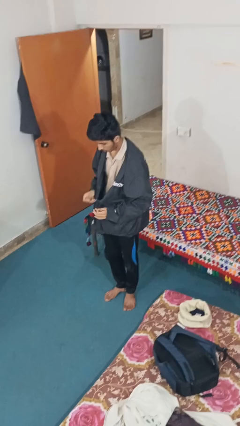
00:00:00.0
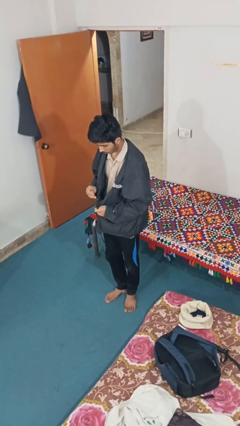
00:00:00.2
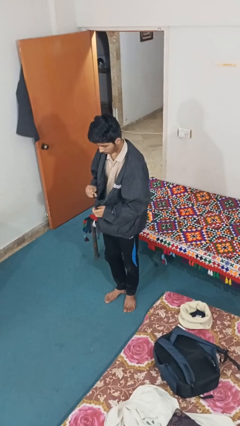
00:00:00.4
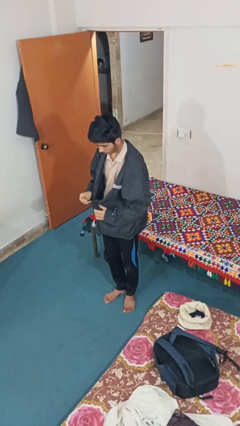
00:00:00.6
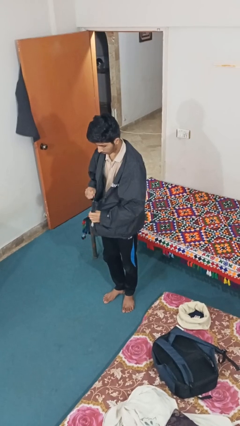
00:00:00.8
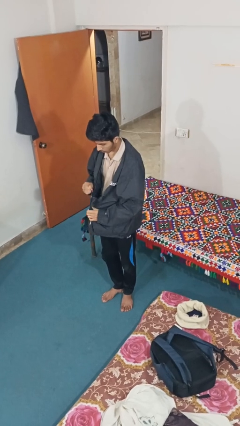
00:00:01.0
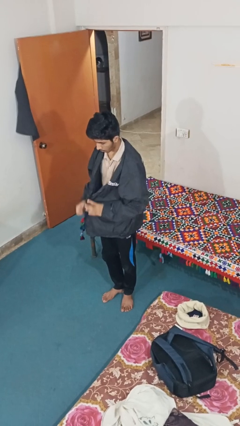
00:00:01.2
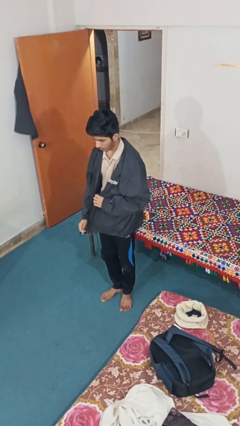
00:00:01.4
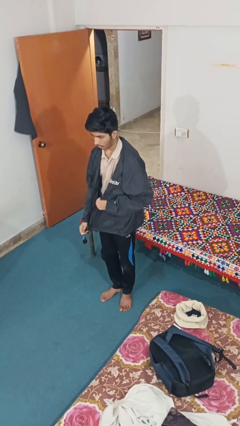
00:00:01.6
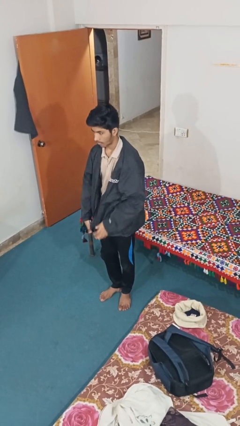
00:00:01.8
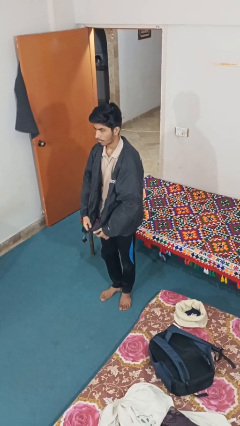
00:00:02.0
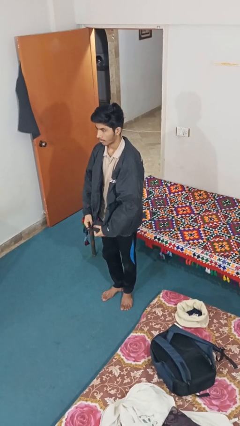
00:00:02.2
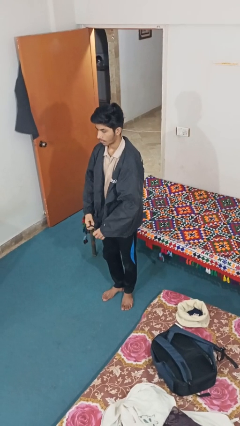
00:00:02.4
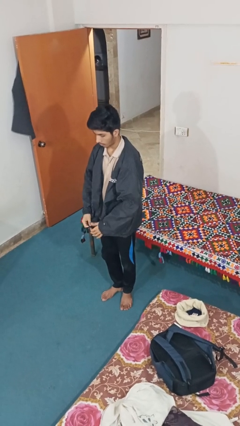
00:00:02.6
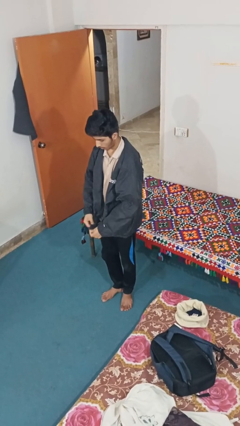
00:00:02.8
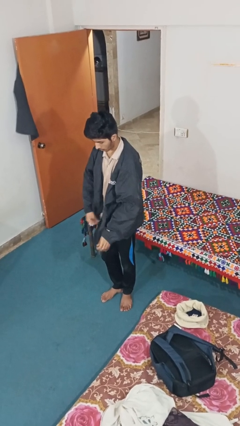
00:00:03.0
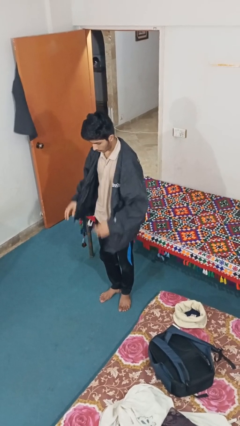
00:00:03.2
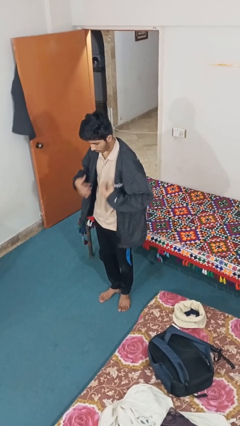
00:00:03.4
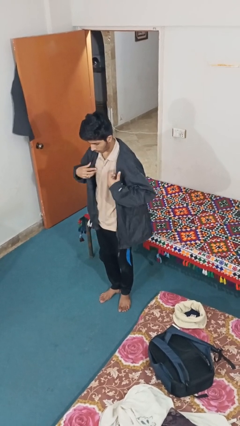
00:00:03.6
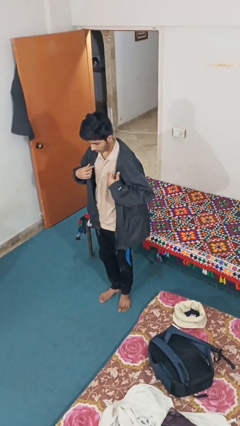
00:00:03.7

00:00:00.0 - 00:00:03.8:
person unzips jacket

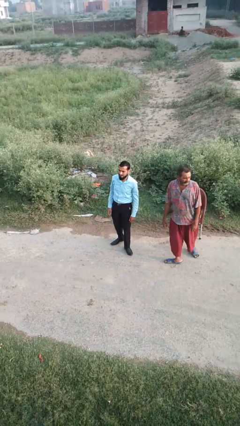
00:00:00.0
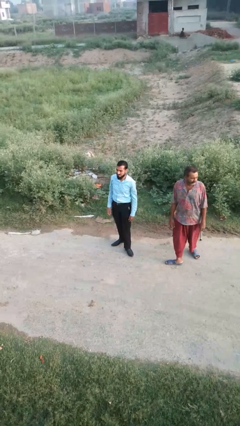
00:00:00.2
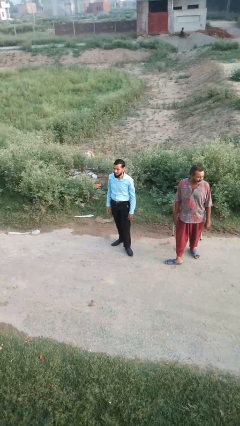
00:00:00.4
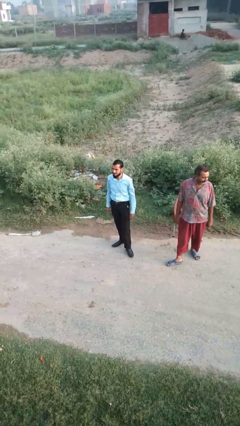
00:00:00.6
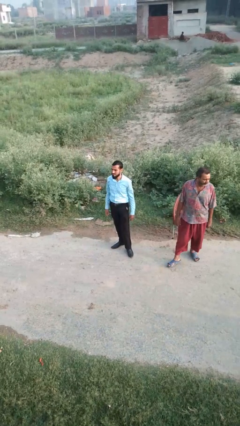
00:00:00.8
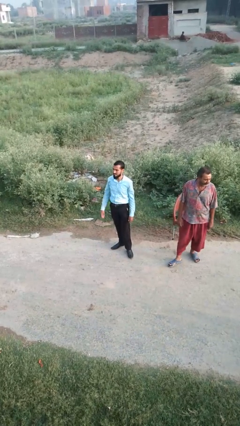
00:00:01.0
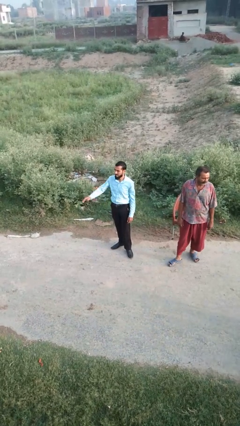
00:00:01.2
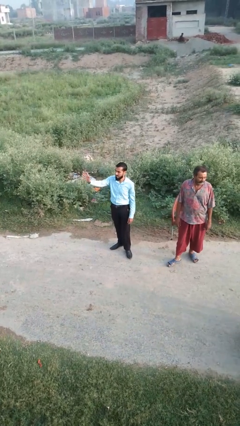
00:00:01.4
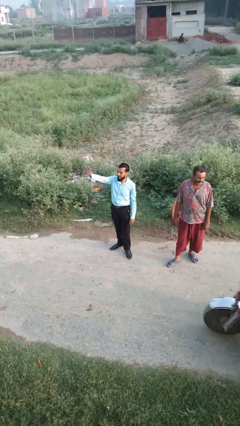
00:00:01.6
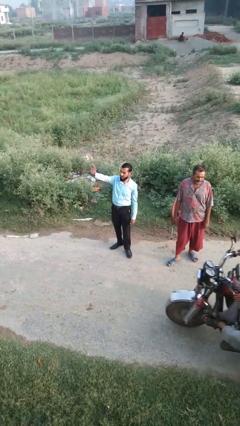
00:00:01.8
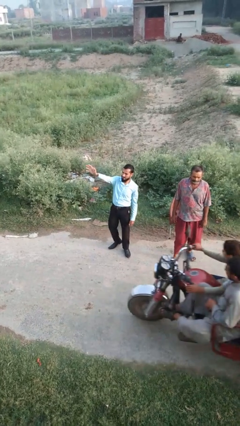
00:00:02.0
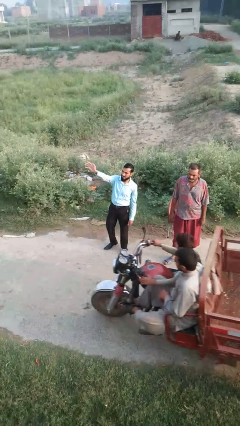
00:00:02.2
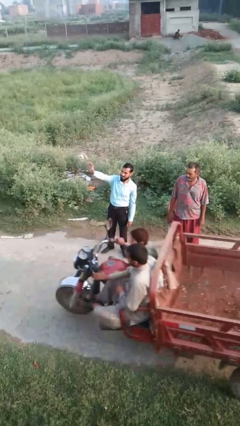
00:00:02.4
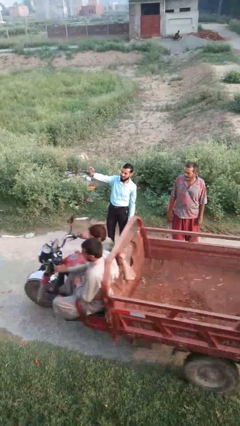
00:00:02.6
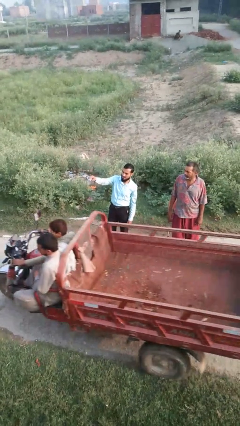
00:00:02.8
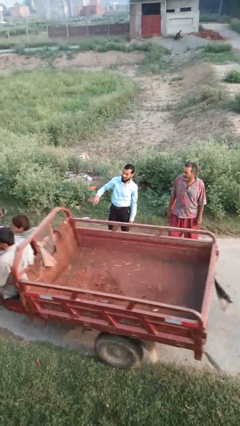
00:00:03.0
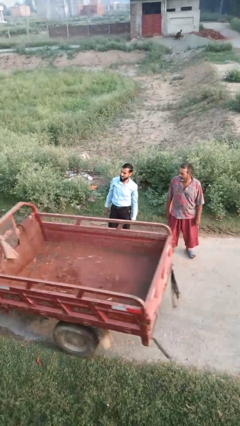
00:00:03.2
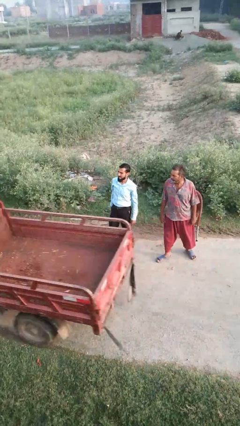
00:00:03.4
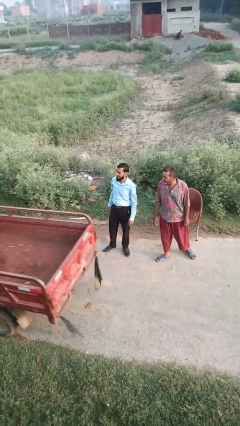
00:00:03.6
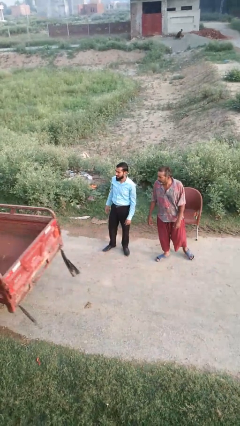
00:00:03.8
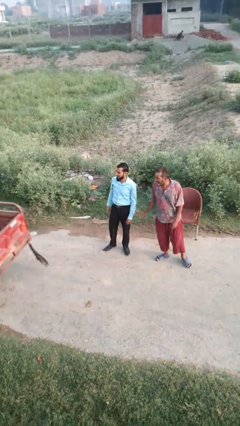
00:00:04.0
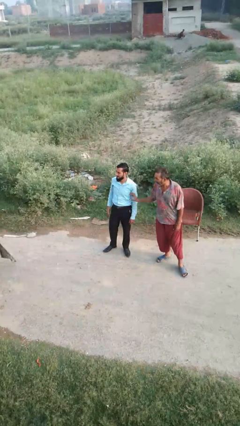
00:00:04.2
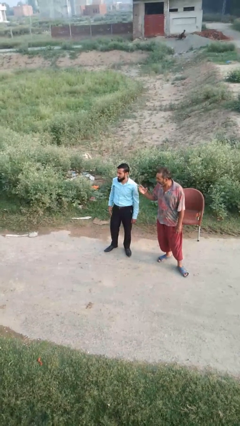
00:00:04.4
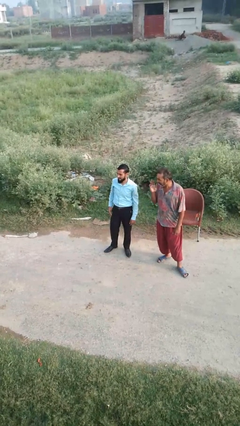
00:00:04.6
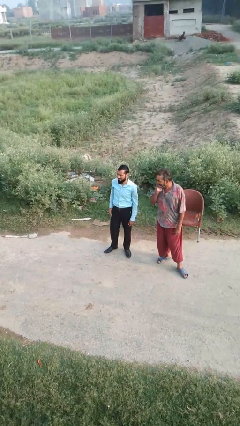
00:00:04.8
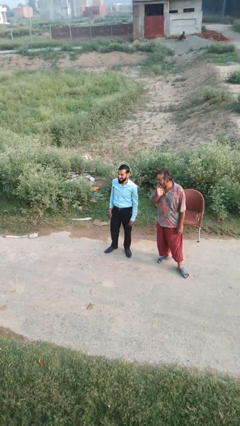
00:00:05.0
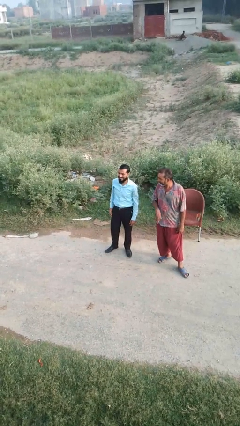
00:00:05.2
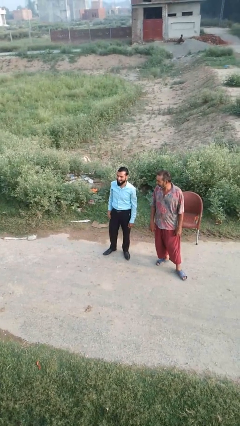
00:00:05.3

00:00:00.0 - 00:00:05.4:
person waves at person

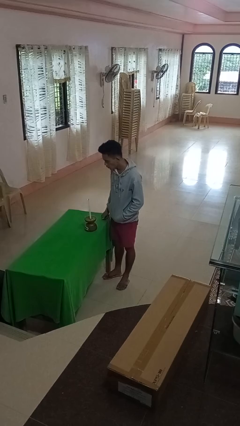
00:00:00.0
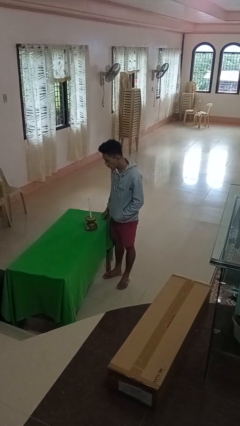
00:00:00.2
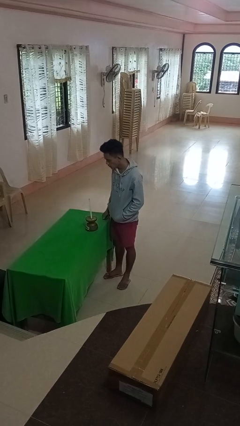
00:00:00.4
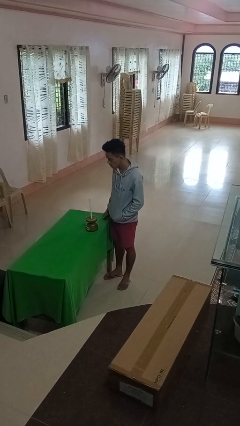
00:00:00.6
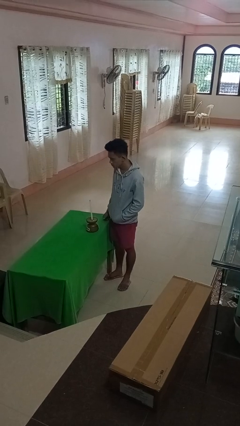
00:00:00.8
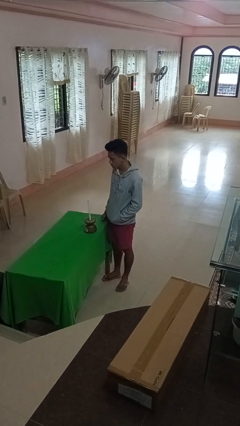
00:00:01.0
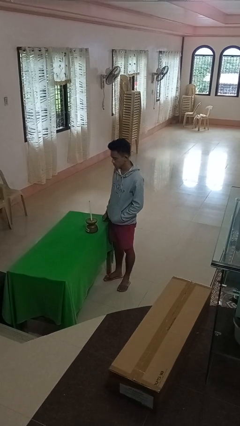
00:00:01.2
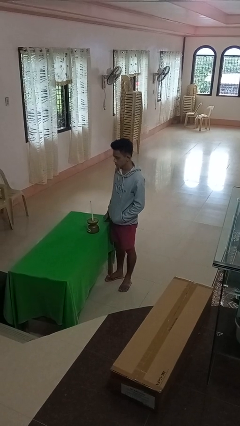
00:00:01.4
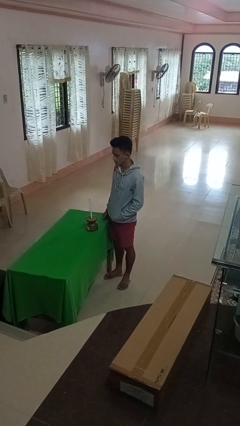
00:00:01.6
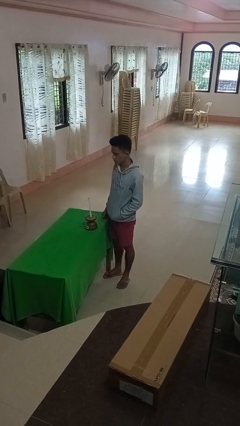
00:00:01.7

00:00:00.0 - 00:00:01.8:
person extinguishes candle

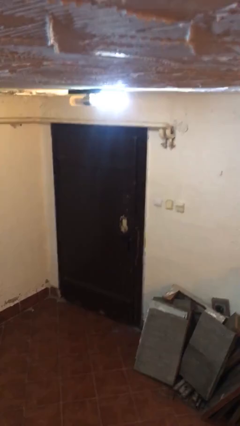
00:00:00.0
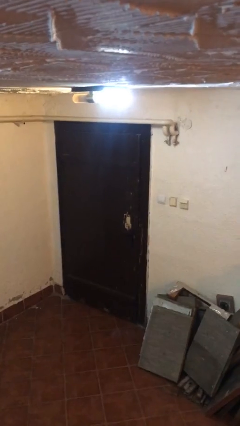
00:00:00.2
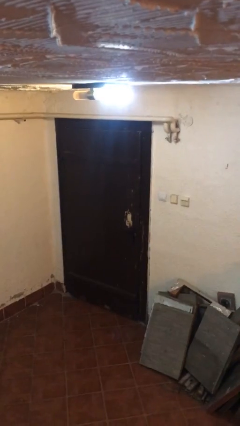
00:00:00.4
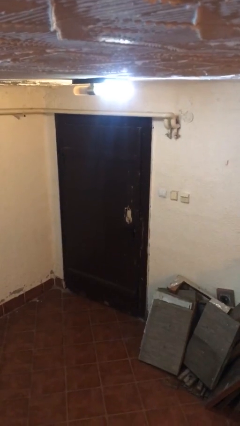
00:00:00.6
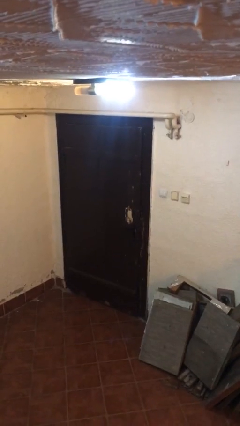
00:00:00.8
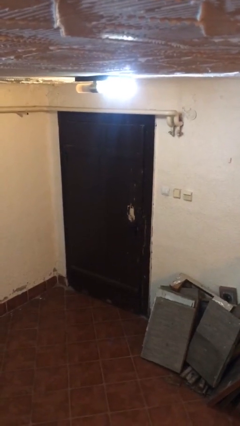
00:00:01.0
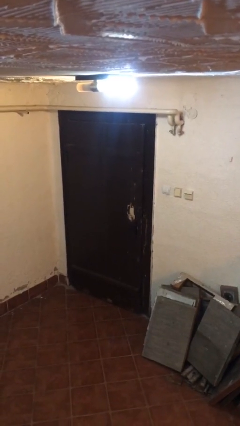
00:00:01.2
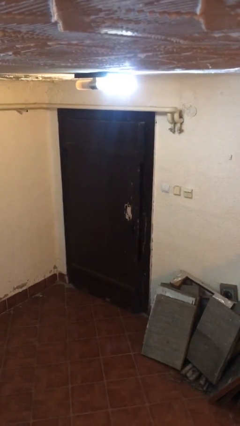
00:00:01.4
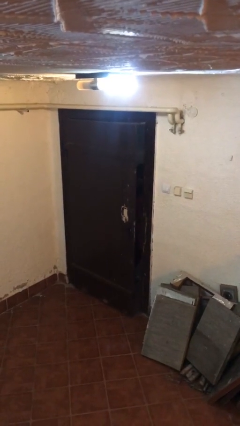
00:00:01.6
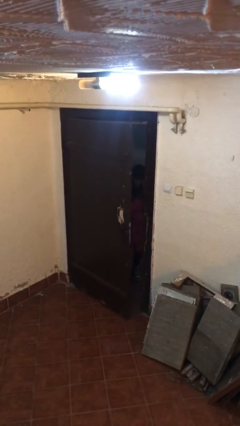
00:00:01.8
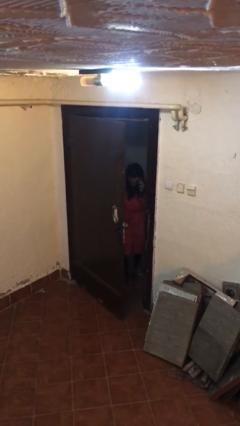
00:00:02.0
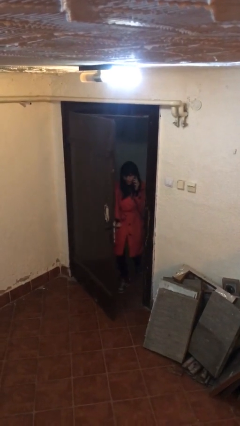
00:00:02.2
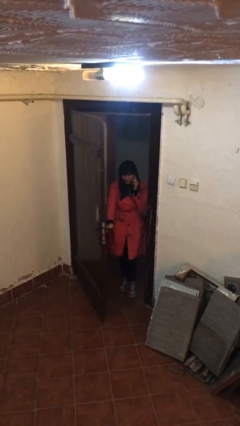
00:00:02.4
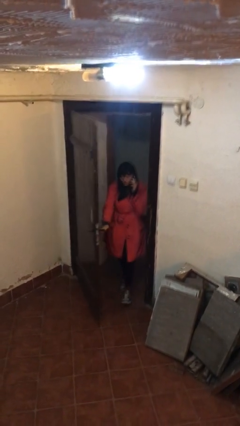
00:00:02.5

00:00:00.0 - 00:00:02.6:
person opens facility door

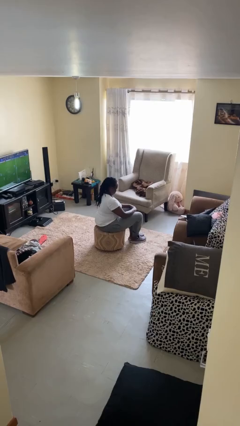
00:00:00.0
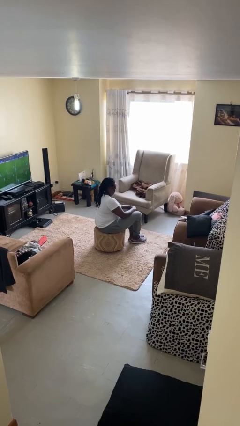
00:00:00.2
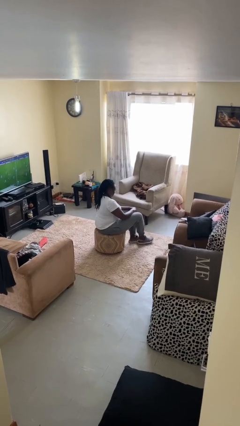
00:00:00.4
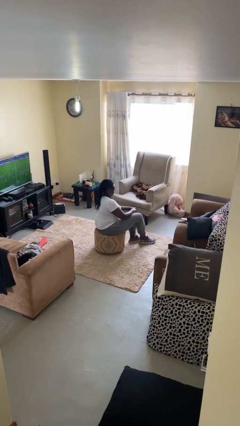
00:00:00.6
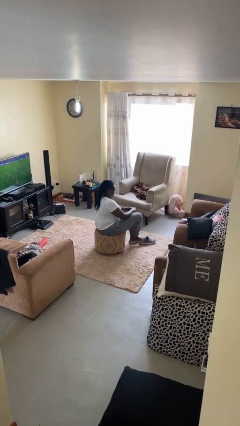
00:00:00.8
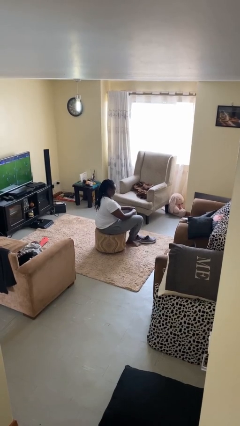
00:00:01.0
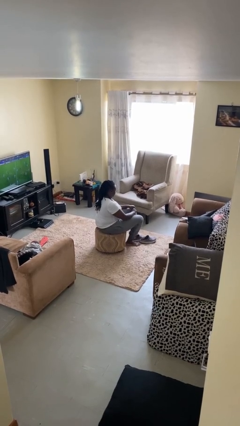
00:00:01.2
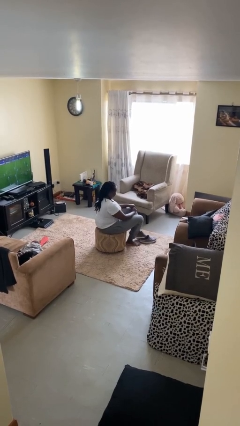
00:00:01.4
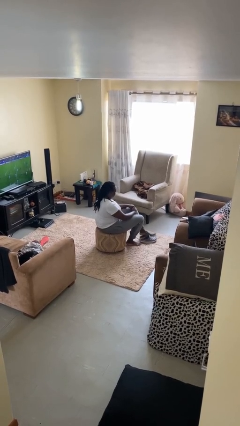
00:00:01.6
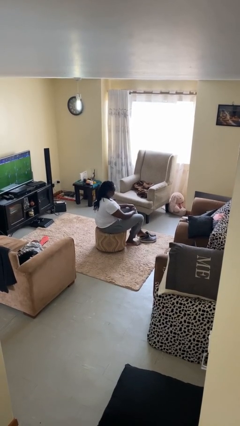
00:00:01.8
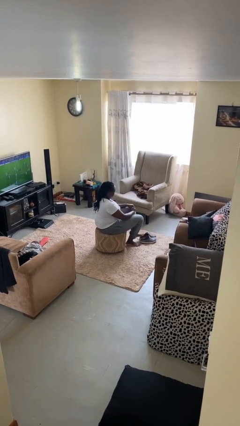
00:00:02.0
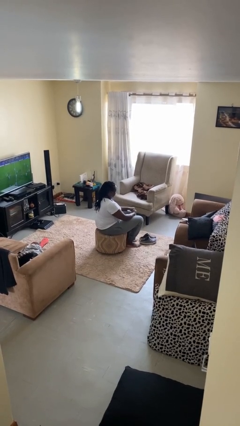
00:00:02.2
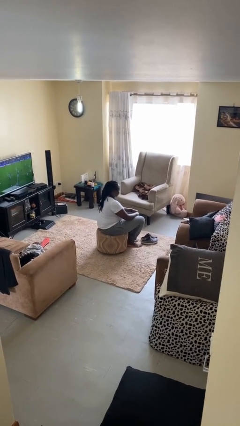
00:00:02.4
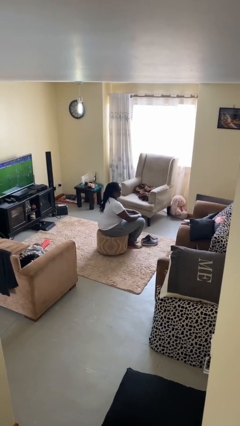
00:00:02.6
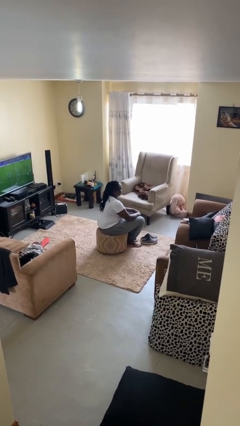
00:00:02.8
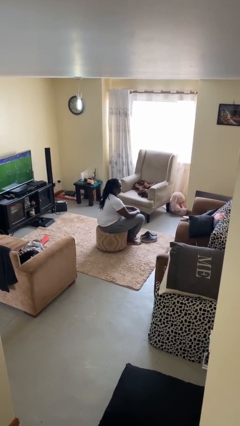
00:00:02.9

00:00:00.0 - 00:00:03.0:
person takes off shoes

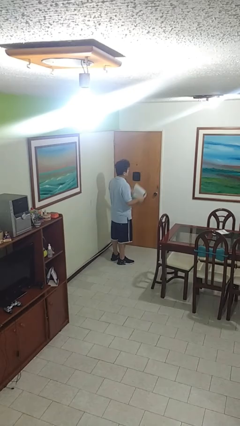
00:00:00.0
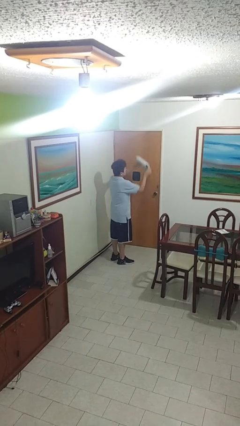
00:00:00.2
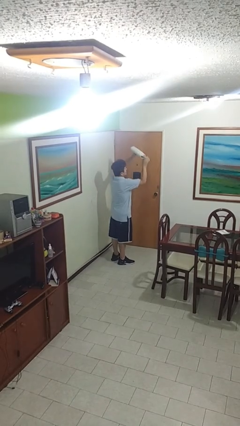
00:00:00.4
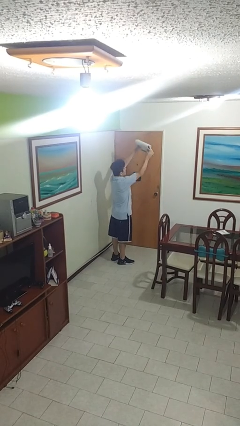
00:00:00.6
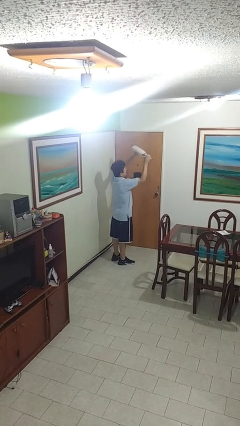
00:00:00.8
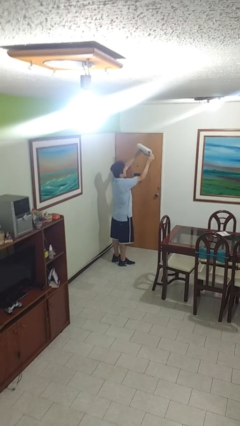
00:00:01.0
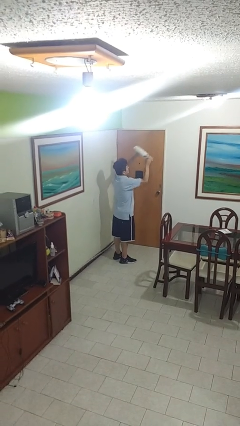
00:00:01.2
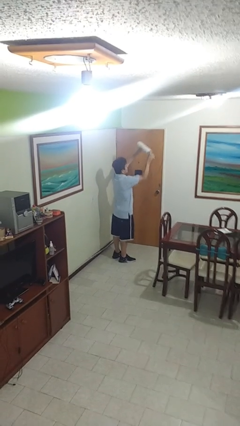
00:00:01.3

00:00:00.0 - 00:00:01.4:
person holds object above head
